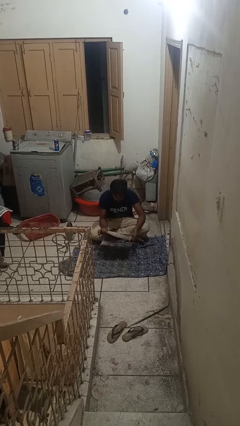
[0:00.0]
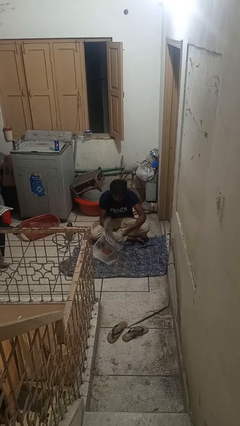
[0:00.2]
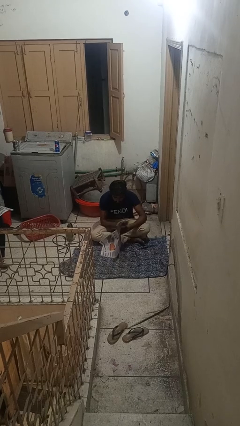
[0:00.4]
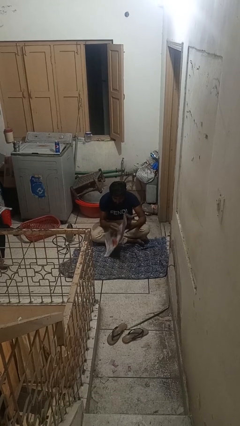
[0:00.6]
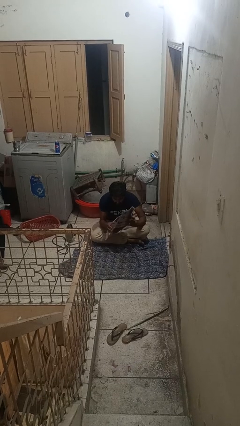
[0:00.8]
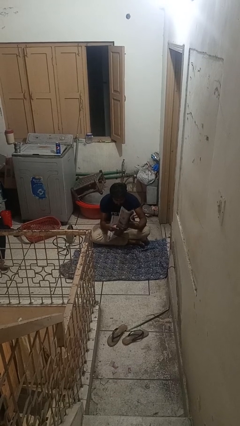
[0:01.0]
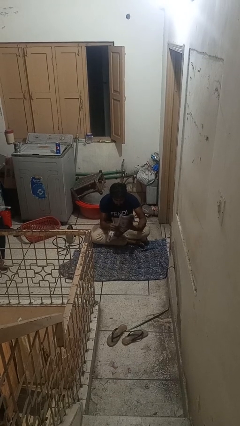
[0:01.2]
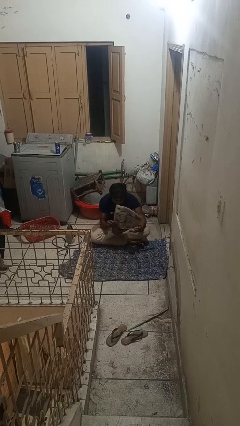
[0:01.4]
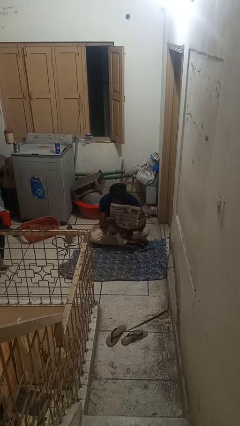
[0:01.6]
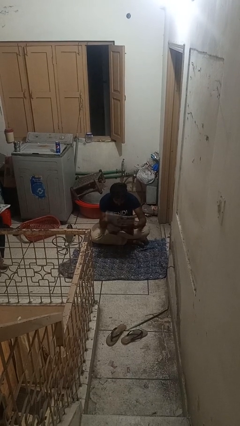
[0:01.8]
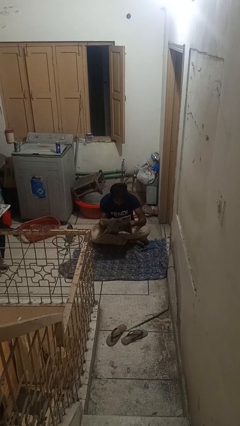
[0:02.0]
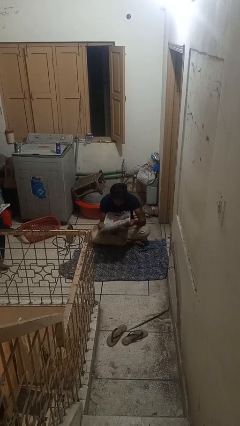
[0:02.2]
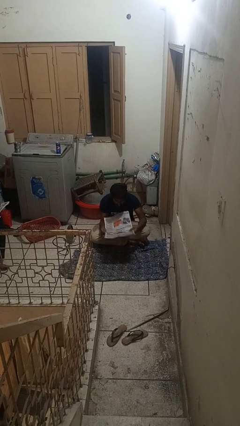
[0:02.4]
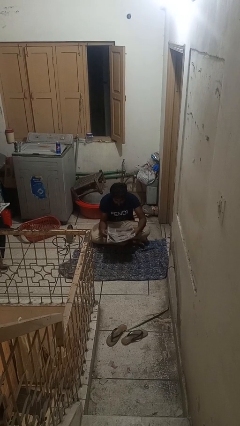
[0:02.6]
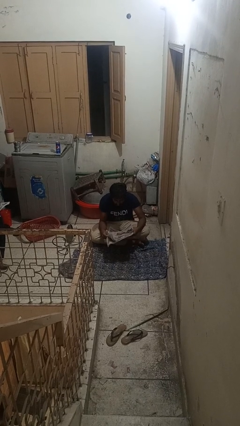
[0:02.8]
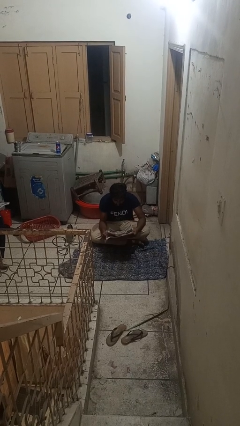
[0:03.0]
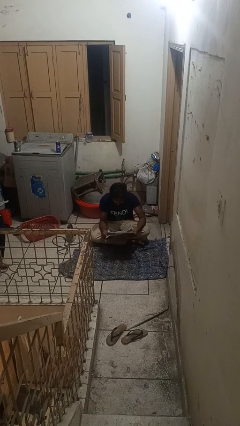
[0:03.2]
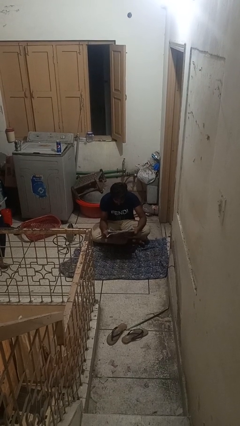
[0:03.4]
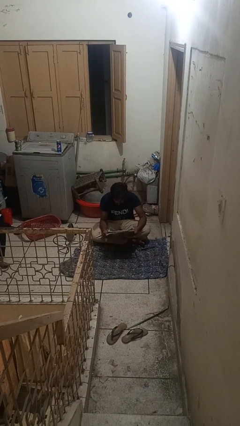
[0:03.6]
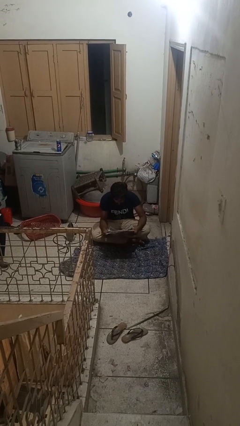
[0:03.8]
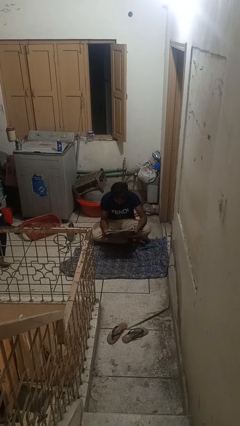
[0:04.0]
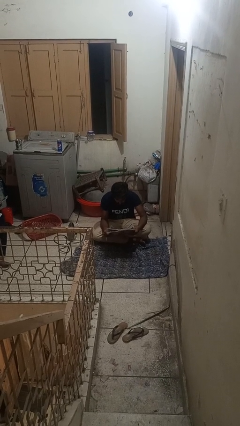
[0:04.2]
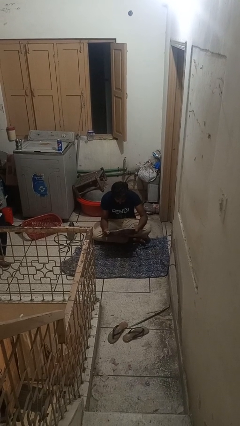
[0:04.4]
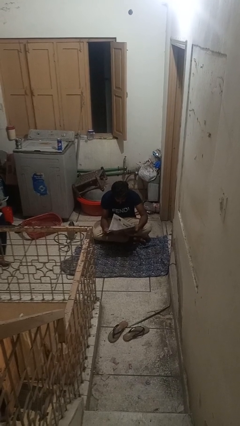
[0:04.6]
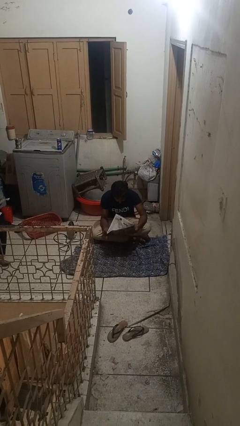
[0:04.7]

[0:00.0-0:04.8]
person reads newspaper

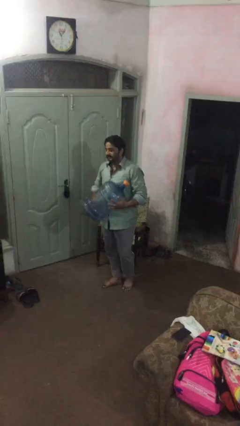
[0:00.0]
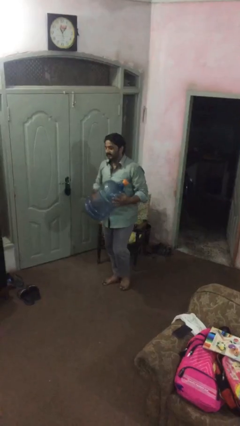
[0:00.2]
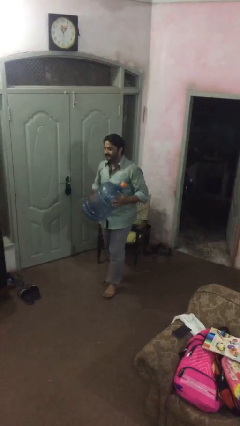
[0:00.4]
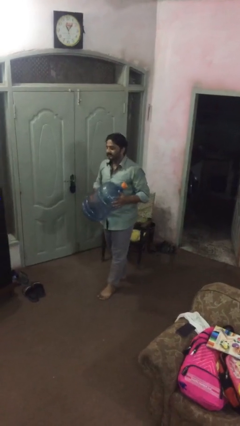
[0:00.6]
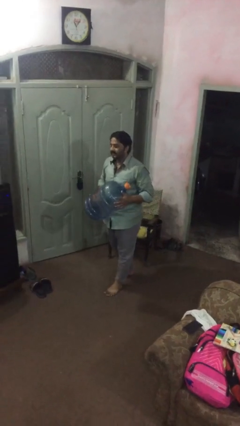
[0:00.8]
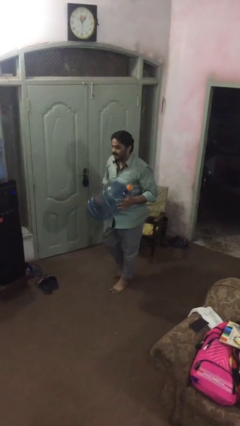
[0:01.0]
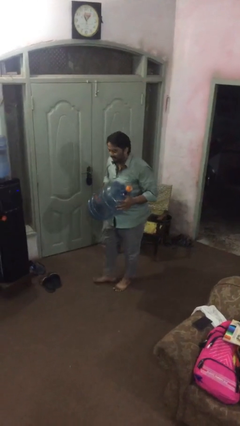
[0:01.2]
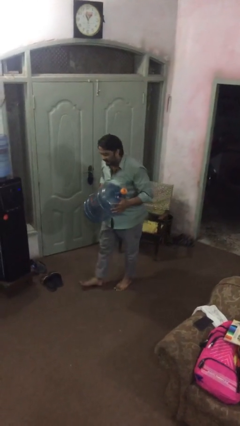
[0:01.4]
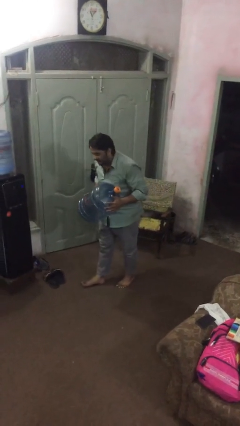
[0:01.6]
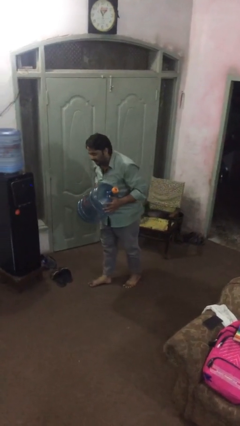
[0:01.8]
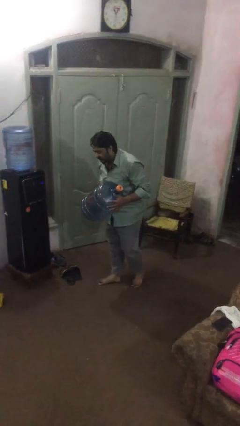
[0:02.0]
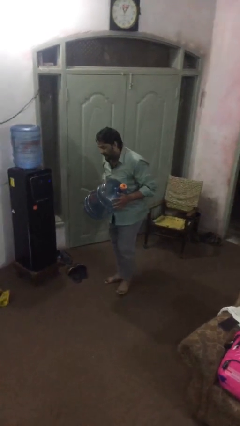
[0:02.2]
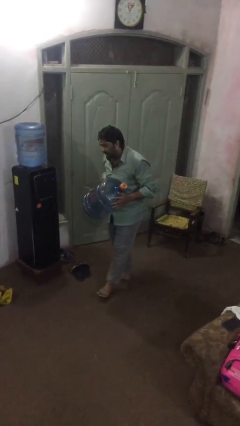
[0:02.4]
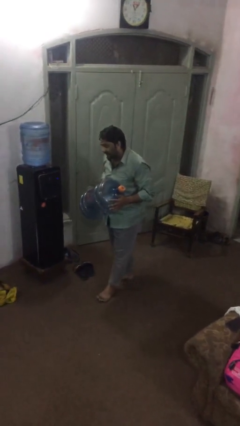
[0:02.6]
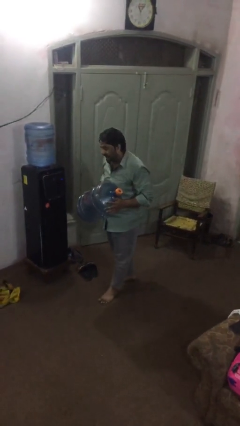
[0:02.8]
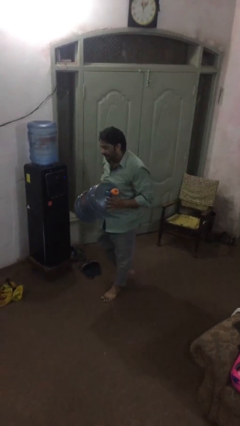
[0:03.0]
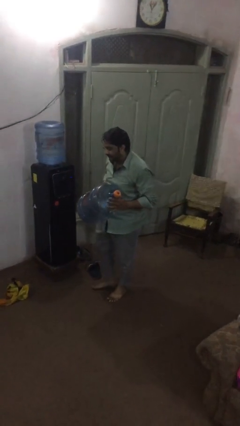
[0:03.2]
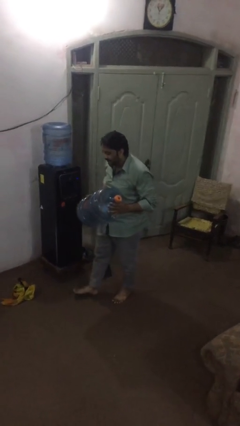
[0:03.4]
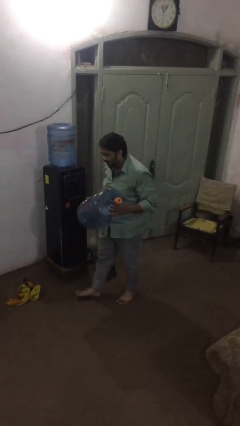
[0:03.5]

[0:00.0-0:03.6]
person carries heavy object

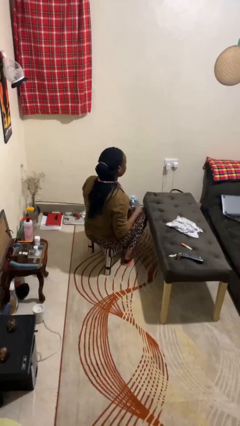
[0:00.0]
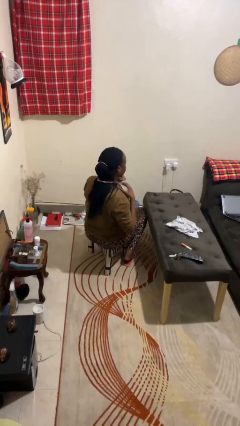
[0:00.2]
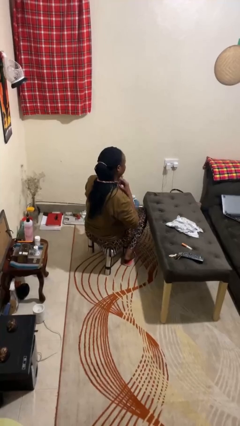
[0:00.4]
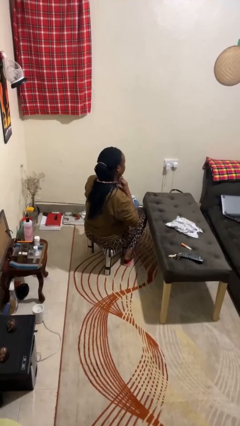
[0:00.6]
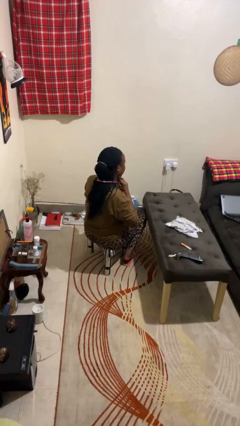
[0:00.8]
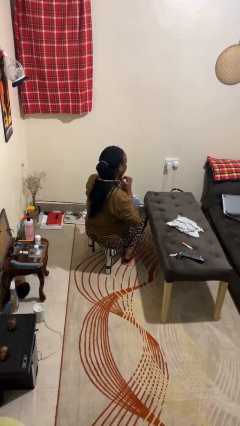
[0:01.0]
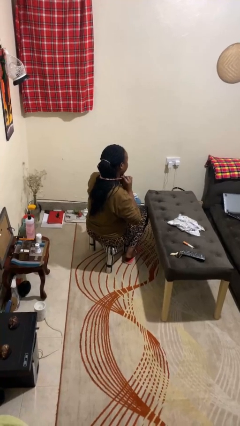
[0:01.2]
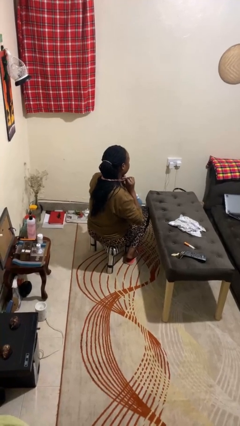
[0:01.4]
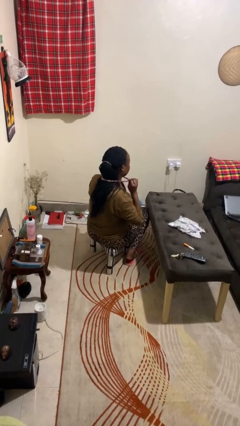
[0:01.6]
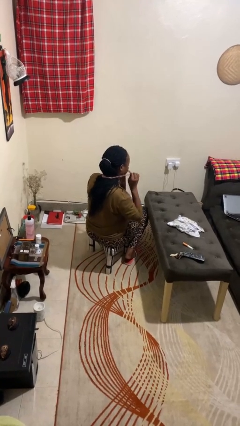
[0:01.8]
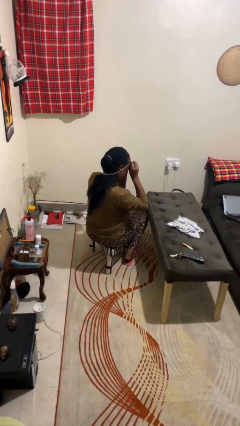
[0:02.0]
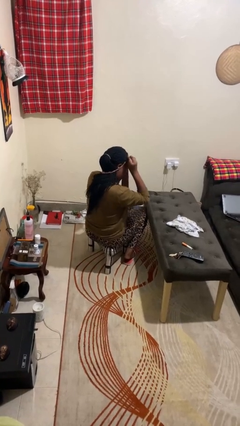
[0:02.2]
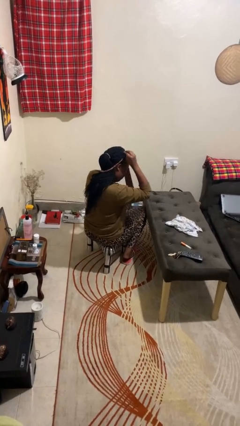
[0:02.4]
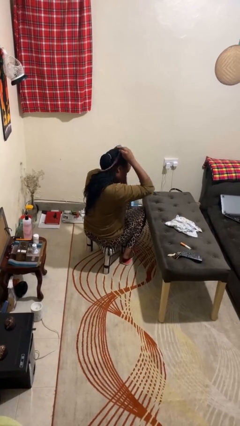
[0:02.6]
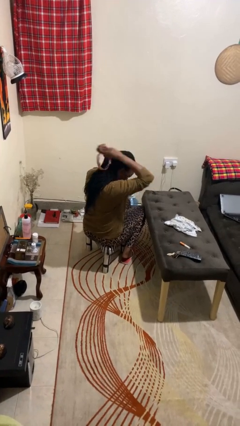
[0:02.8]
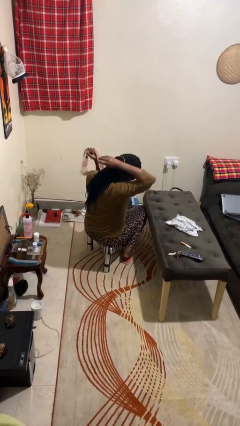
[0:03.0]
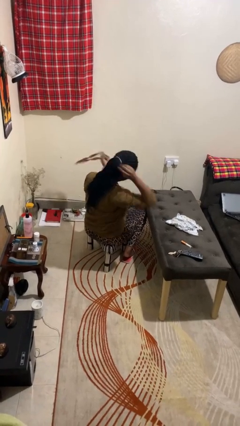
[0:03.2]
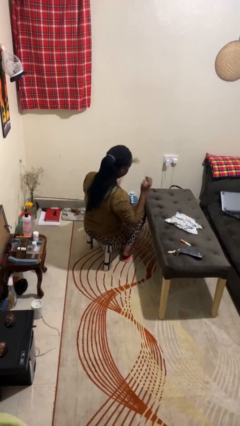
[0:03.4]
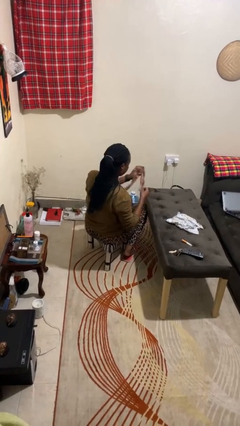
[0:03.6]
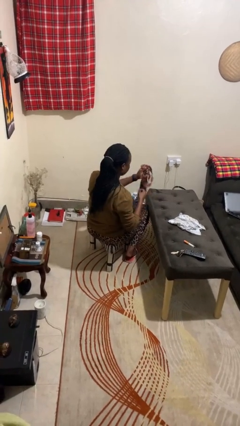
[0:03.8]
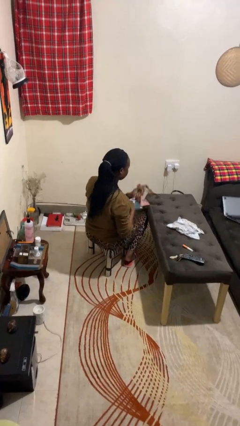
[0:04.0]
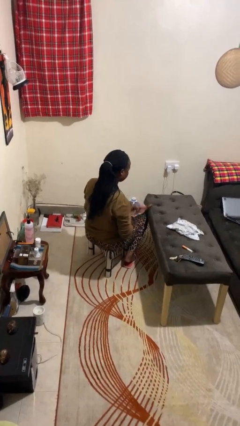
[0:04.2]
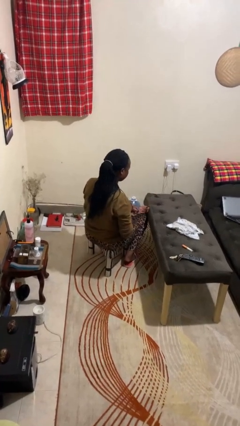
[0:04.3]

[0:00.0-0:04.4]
person takes off necktie

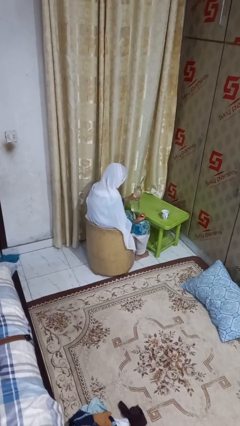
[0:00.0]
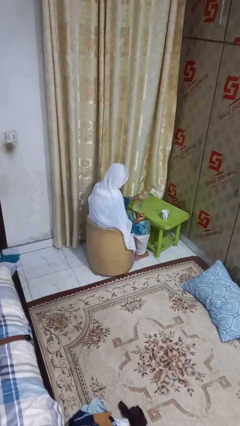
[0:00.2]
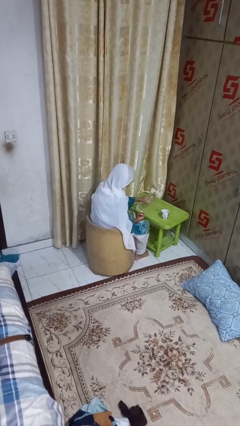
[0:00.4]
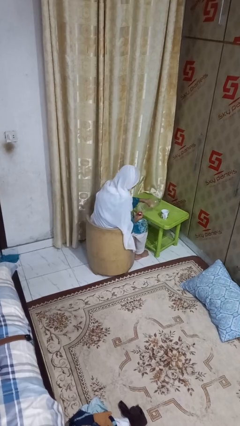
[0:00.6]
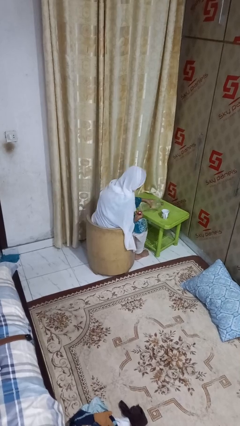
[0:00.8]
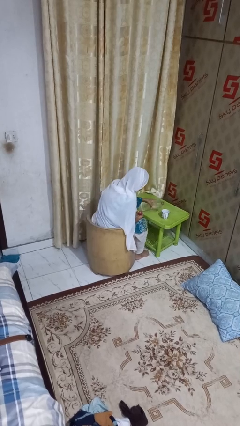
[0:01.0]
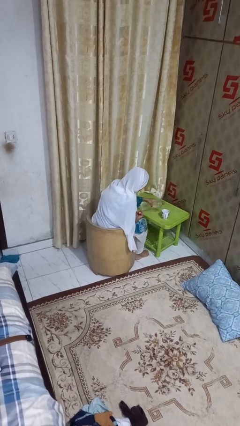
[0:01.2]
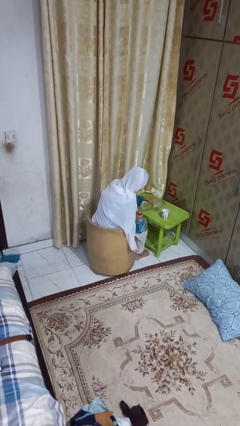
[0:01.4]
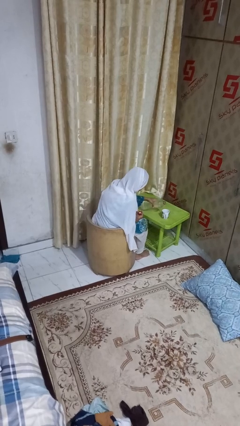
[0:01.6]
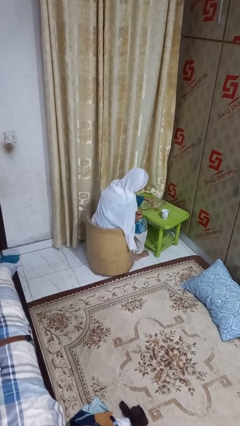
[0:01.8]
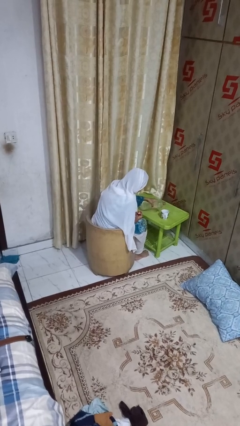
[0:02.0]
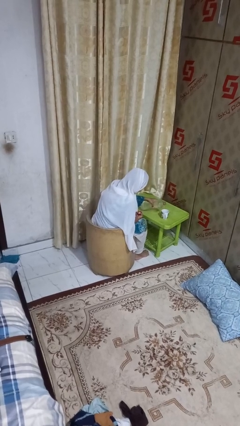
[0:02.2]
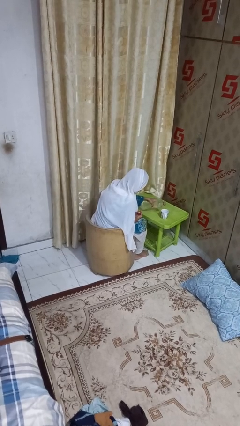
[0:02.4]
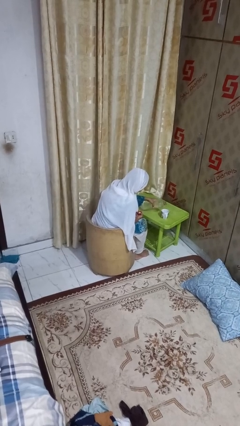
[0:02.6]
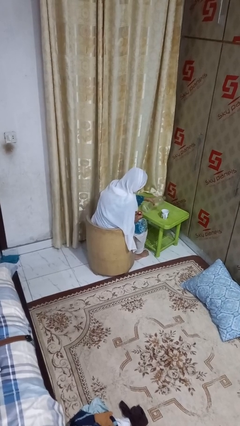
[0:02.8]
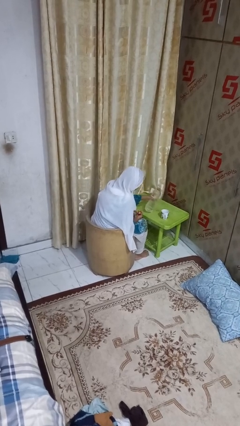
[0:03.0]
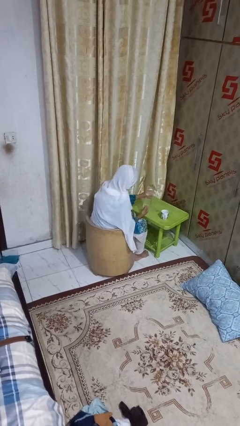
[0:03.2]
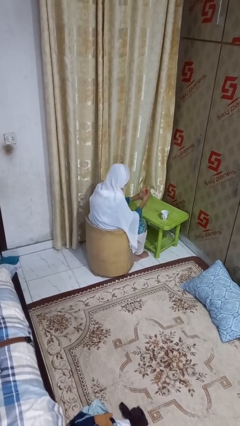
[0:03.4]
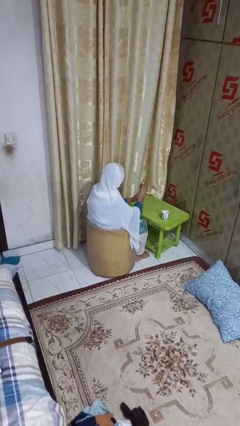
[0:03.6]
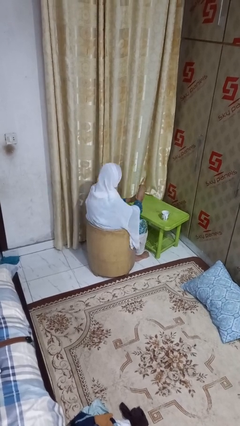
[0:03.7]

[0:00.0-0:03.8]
person pours liquid into cup

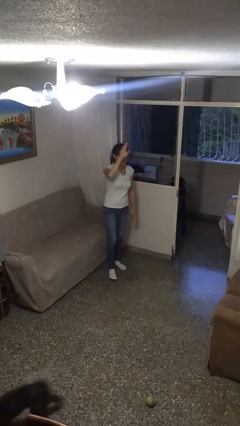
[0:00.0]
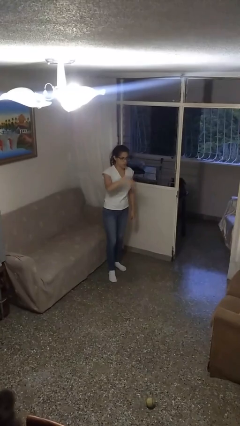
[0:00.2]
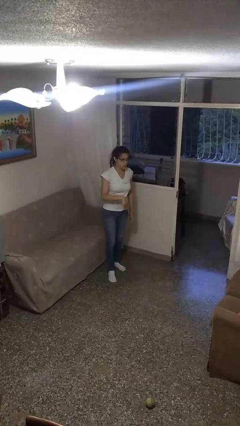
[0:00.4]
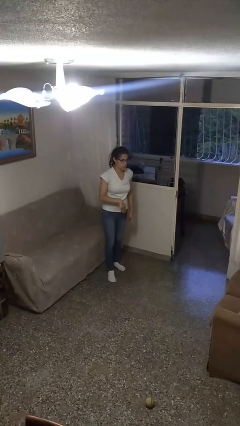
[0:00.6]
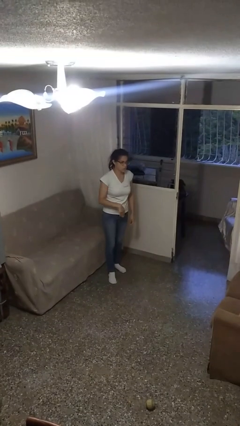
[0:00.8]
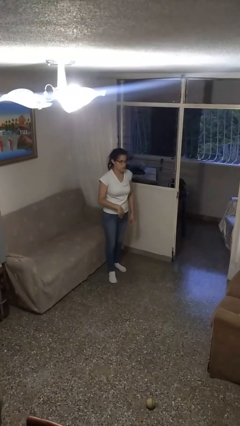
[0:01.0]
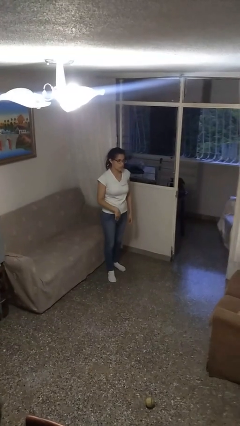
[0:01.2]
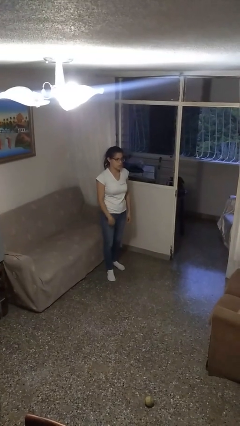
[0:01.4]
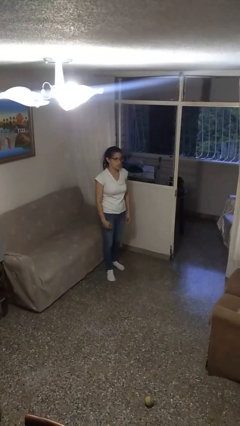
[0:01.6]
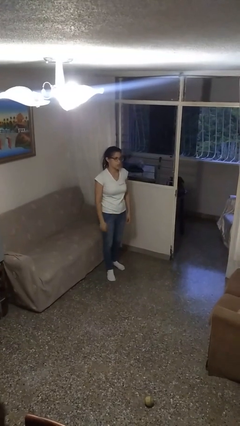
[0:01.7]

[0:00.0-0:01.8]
person gestures swipe down
